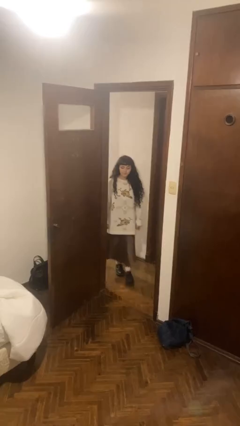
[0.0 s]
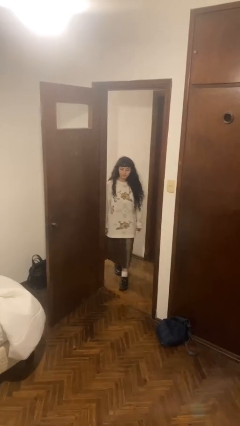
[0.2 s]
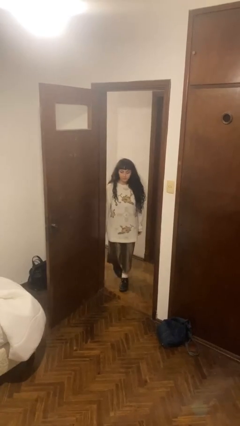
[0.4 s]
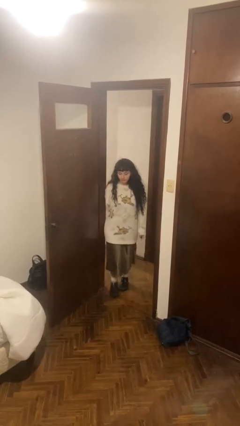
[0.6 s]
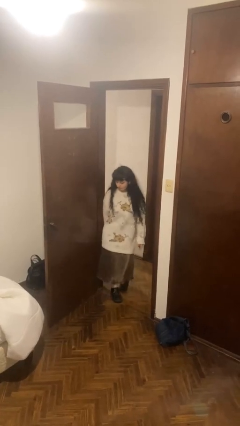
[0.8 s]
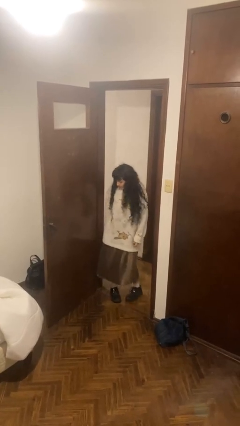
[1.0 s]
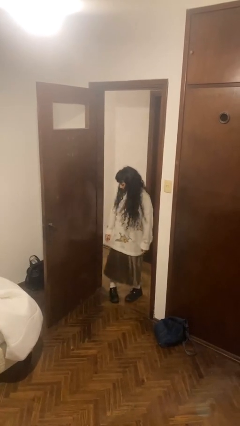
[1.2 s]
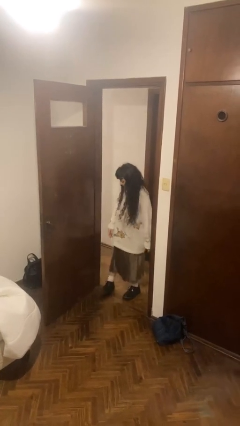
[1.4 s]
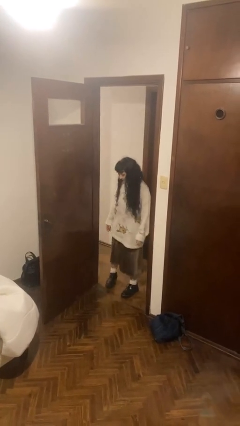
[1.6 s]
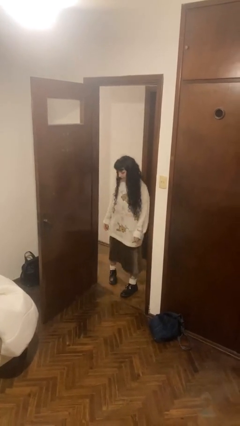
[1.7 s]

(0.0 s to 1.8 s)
person bumps into wall

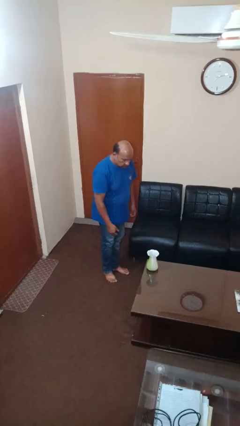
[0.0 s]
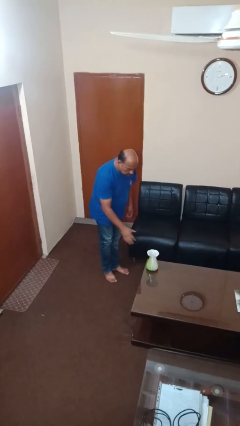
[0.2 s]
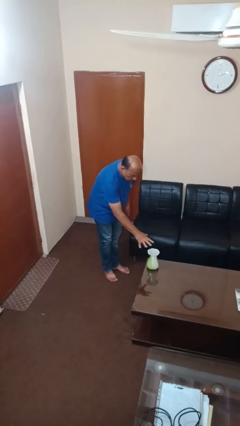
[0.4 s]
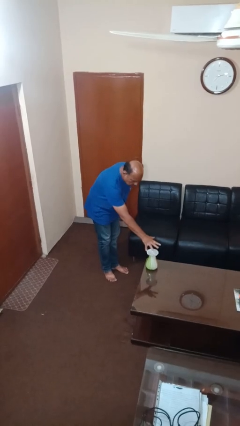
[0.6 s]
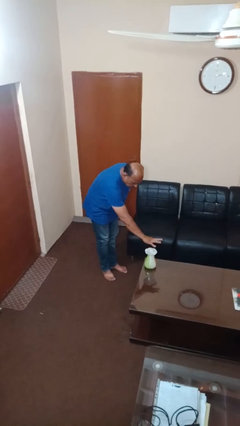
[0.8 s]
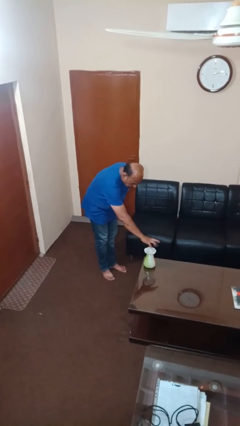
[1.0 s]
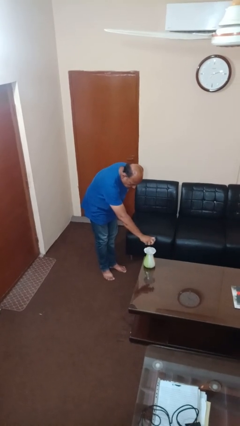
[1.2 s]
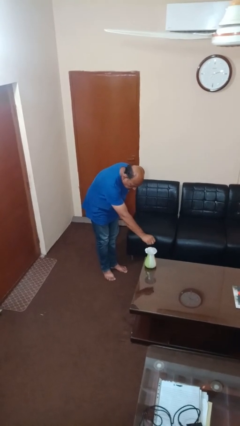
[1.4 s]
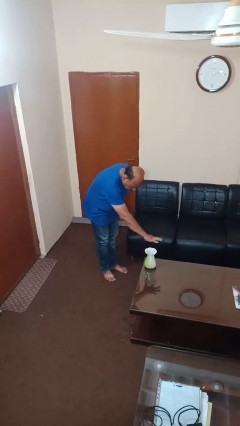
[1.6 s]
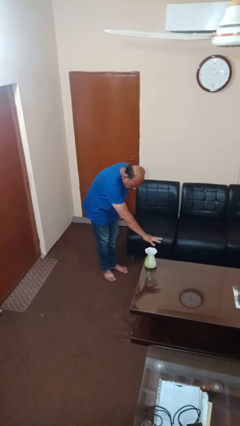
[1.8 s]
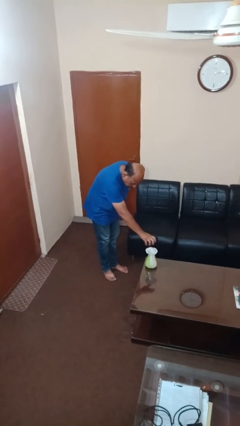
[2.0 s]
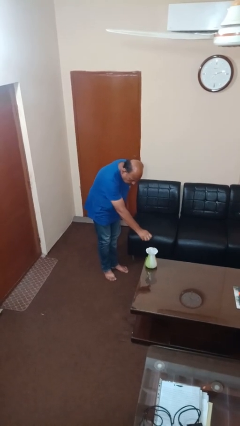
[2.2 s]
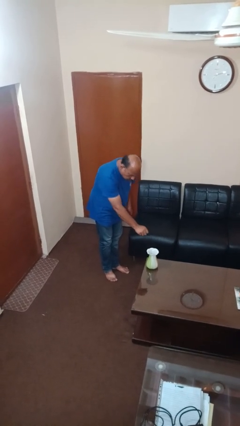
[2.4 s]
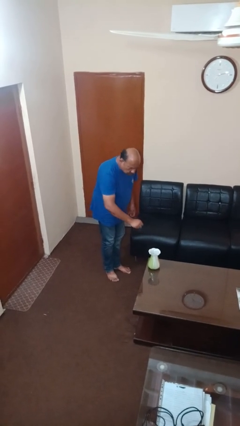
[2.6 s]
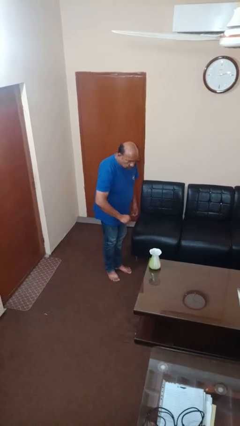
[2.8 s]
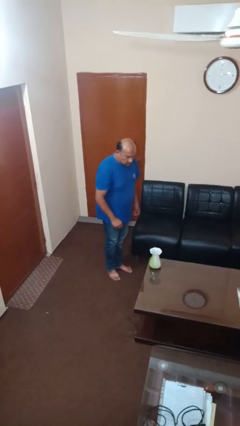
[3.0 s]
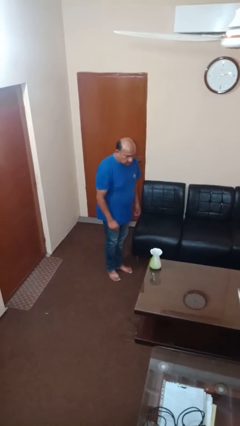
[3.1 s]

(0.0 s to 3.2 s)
person waves hand over object

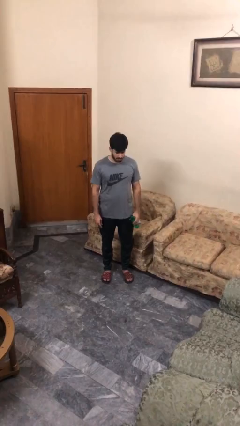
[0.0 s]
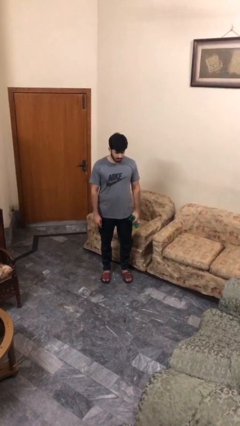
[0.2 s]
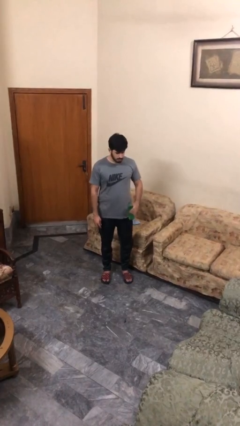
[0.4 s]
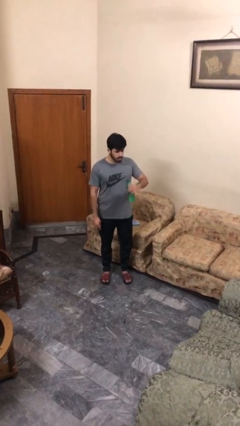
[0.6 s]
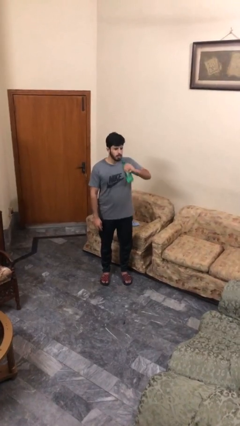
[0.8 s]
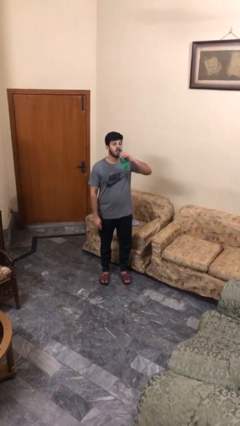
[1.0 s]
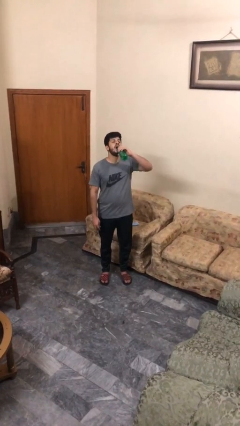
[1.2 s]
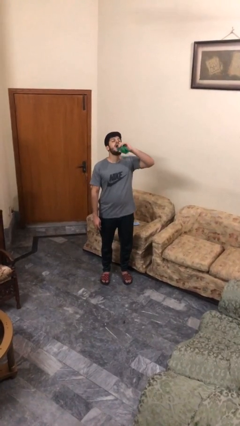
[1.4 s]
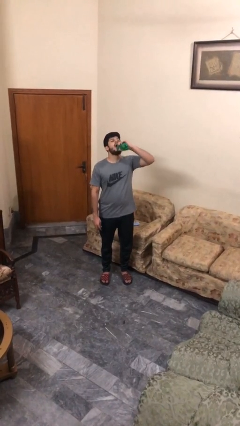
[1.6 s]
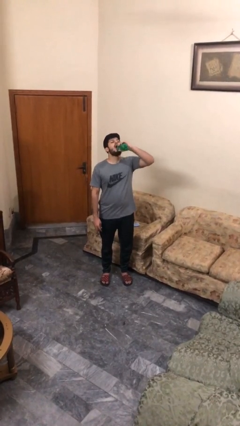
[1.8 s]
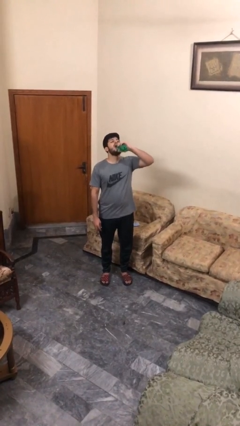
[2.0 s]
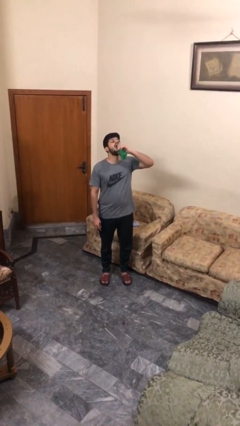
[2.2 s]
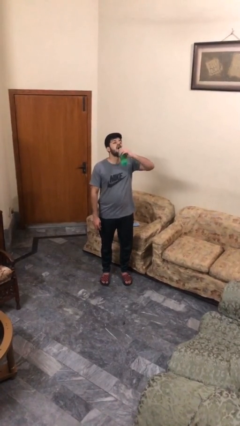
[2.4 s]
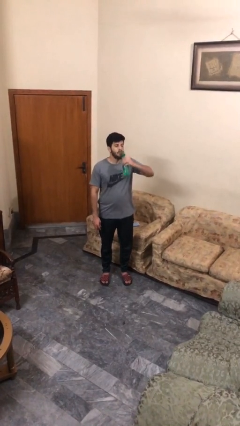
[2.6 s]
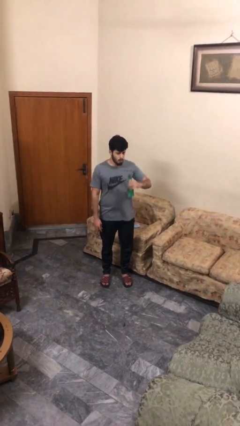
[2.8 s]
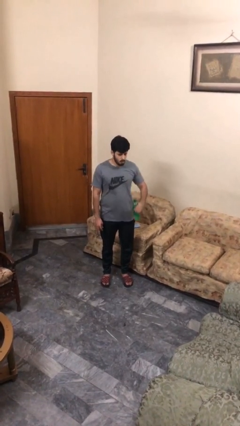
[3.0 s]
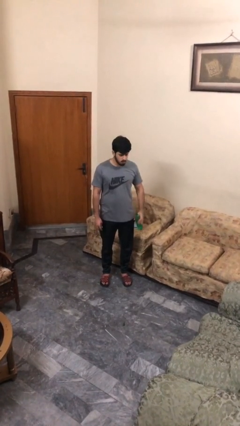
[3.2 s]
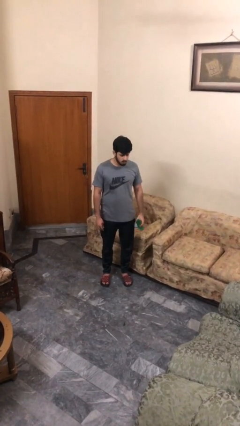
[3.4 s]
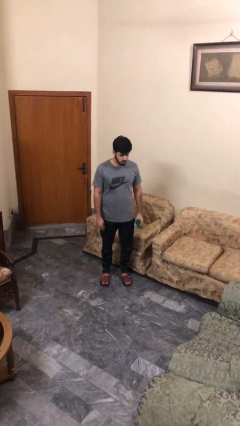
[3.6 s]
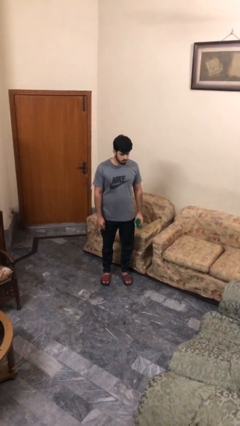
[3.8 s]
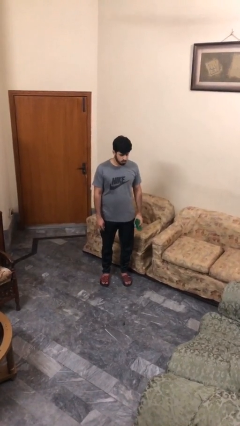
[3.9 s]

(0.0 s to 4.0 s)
person drinks from bottle

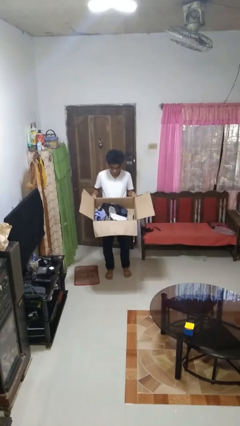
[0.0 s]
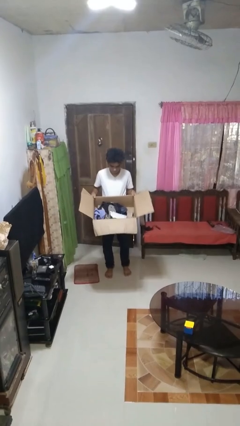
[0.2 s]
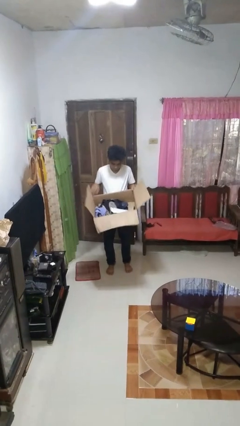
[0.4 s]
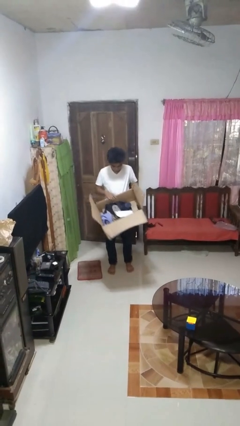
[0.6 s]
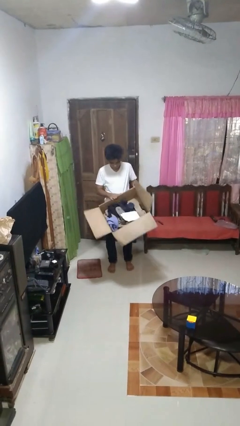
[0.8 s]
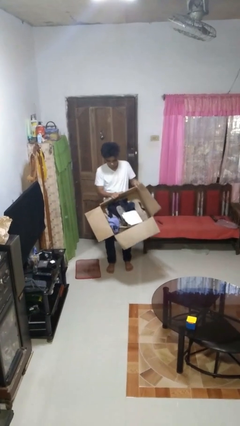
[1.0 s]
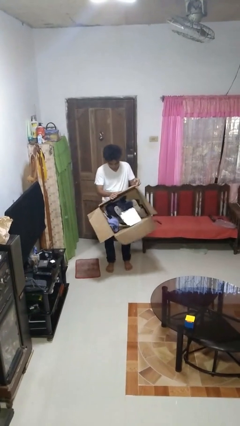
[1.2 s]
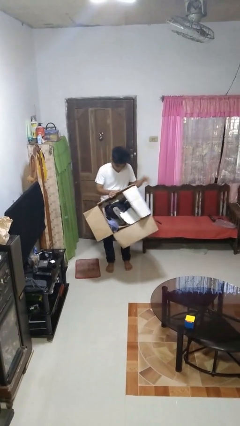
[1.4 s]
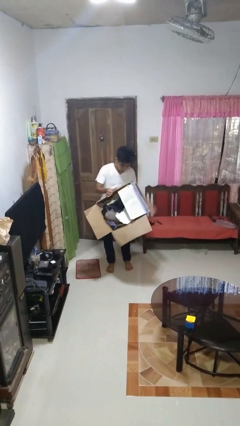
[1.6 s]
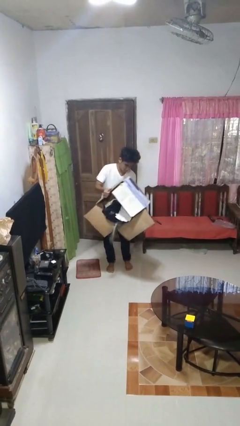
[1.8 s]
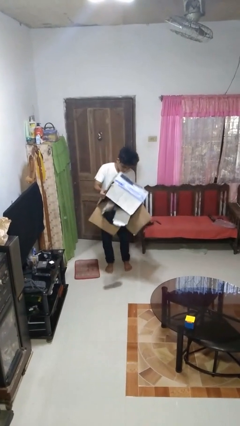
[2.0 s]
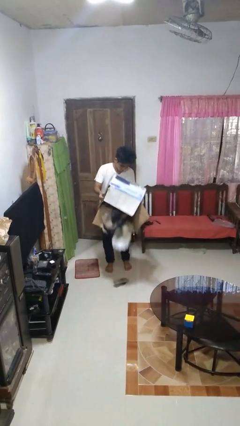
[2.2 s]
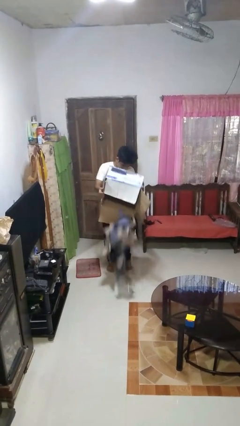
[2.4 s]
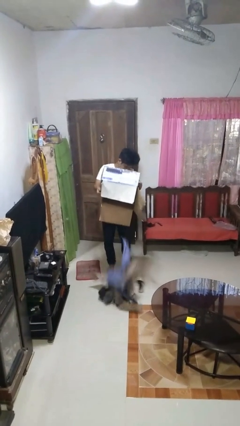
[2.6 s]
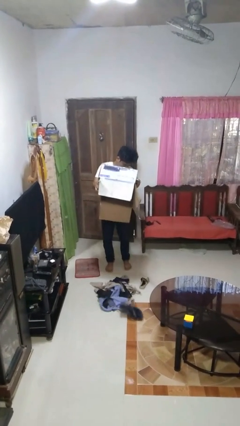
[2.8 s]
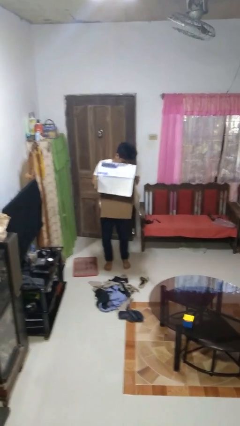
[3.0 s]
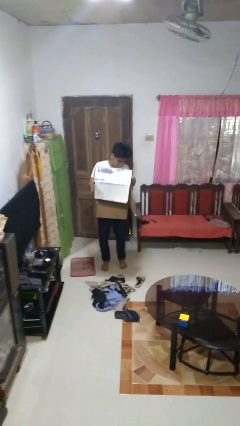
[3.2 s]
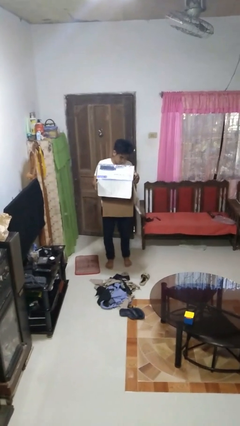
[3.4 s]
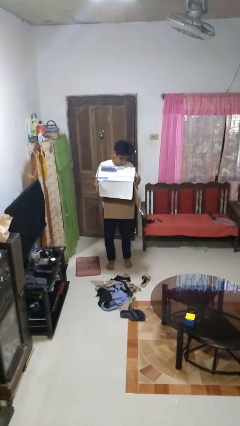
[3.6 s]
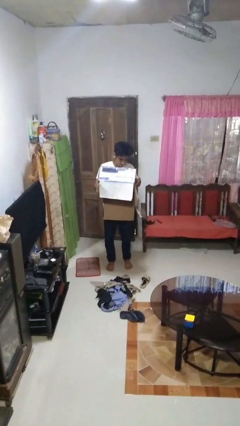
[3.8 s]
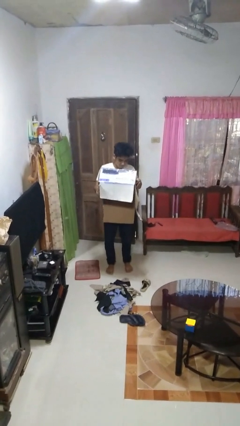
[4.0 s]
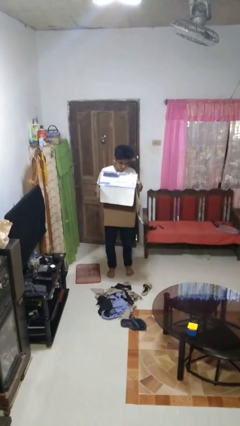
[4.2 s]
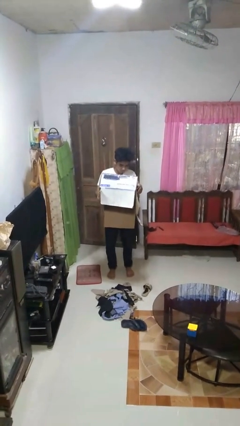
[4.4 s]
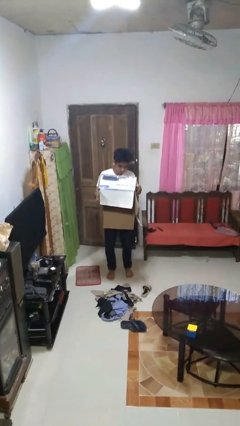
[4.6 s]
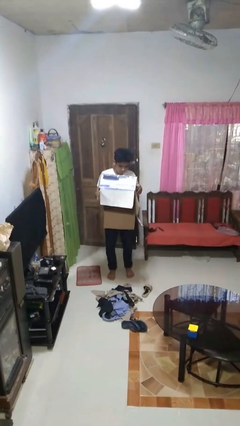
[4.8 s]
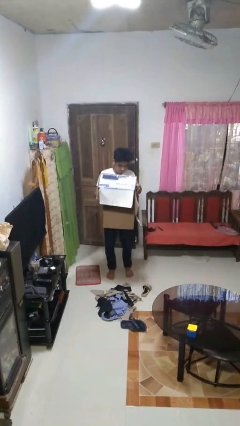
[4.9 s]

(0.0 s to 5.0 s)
person unloads box onto floor

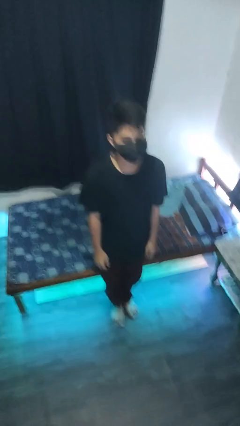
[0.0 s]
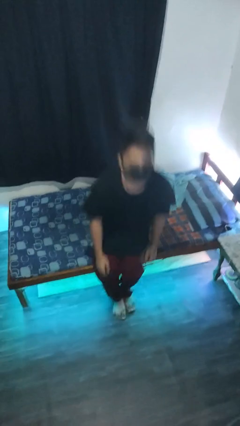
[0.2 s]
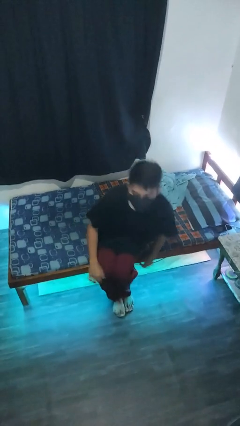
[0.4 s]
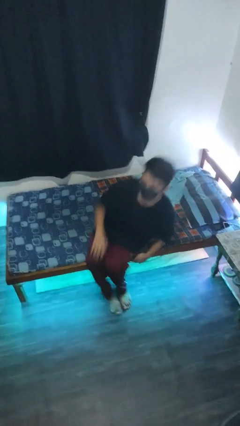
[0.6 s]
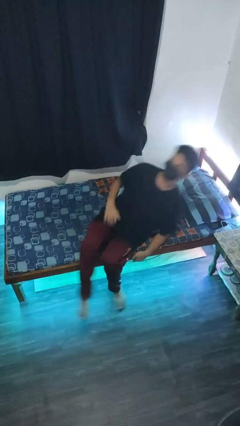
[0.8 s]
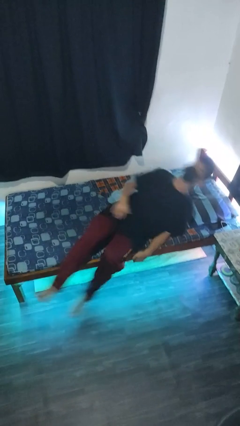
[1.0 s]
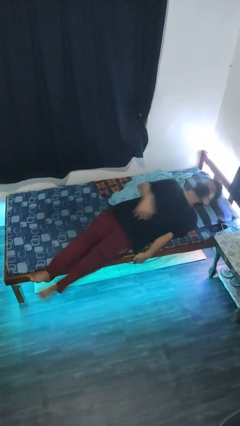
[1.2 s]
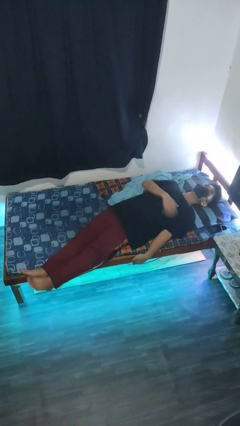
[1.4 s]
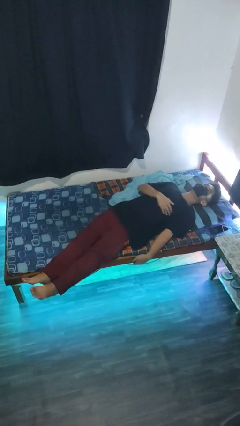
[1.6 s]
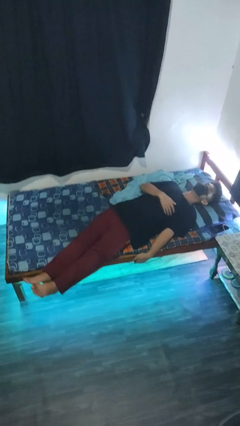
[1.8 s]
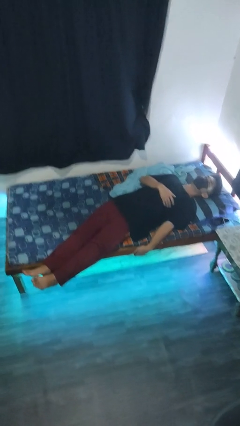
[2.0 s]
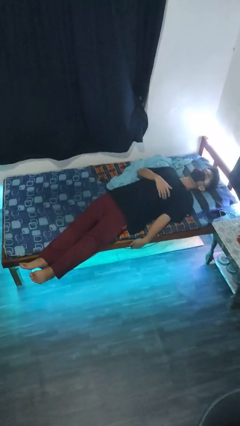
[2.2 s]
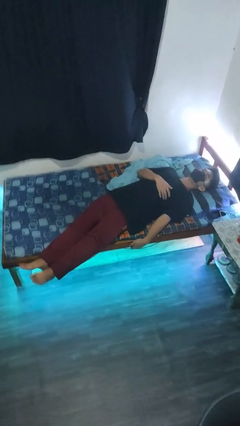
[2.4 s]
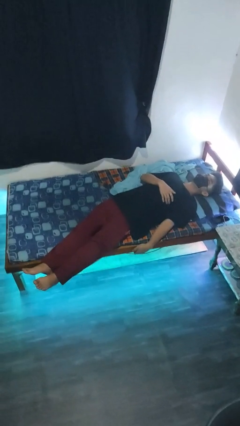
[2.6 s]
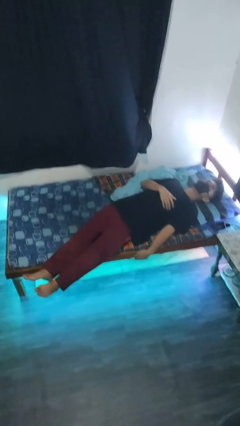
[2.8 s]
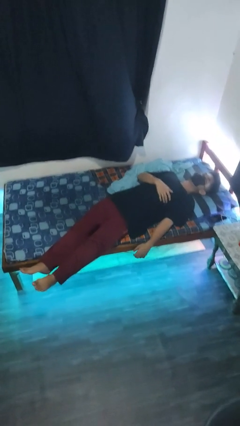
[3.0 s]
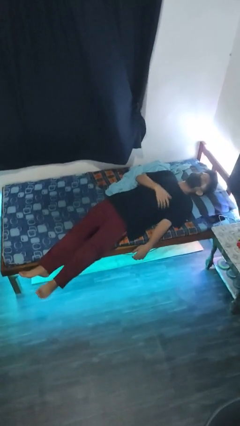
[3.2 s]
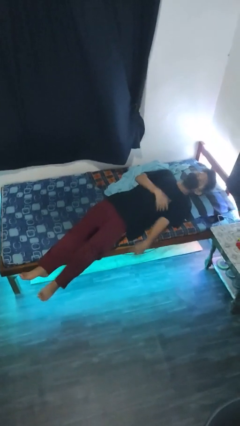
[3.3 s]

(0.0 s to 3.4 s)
person lies down on bed

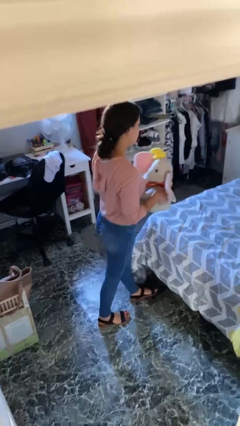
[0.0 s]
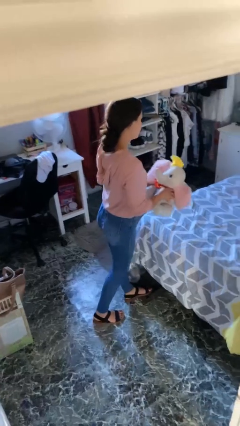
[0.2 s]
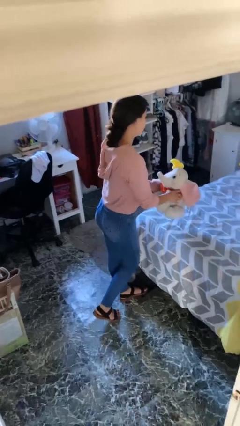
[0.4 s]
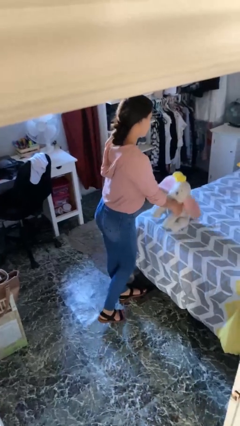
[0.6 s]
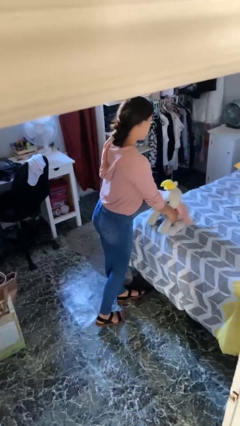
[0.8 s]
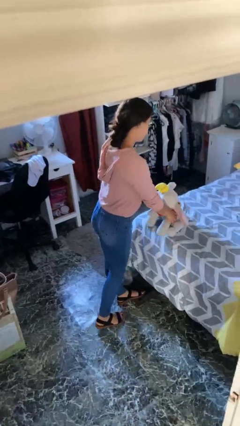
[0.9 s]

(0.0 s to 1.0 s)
person puts down object on bed
